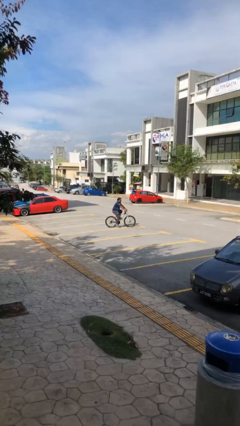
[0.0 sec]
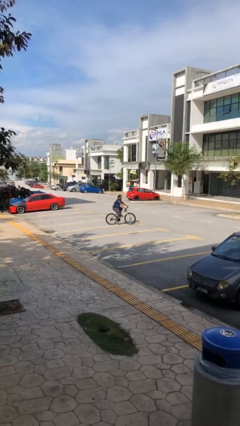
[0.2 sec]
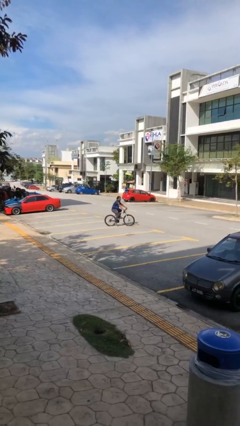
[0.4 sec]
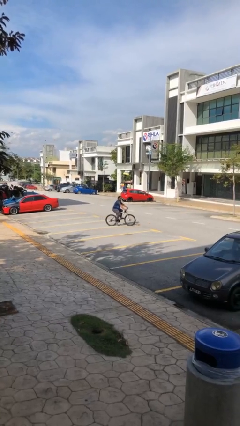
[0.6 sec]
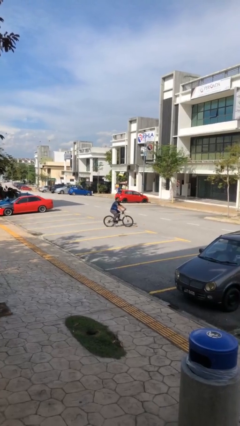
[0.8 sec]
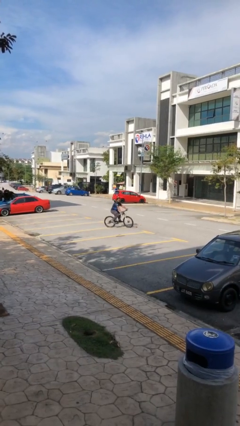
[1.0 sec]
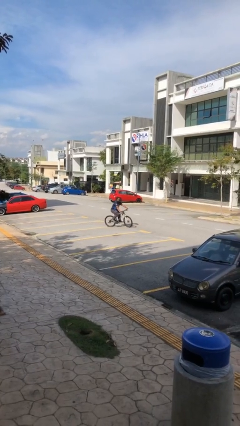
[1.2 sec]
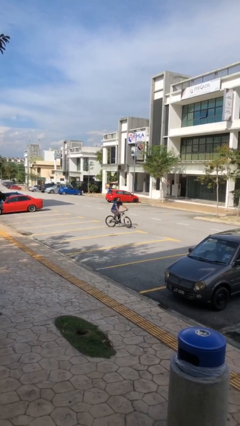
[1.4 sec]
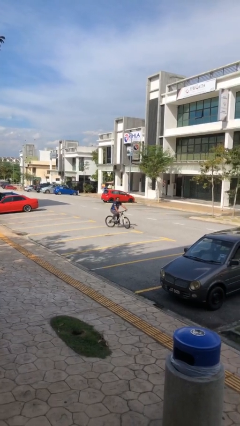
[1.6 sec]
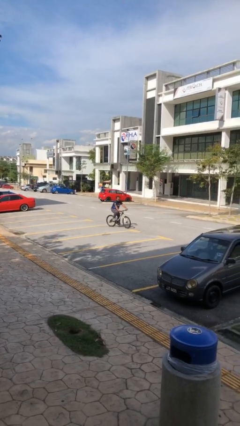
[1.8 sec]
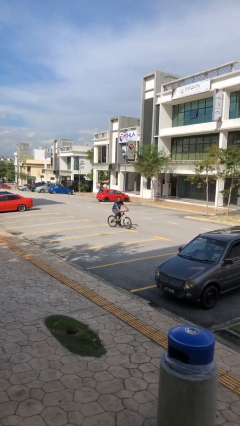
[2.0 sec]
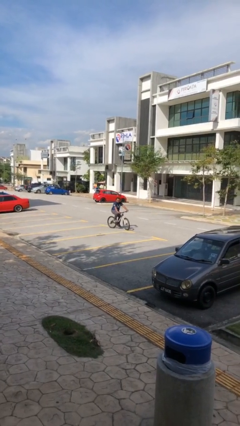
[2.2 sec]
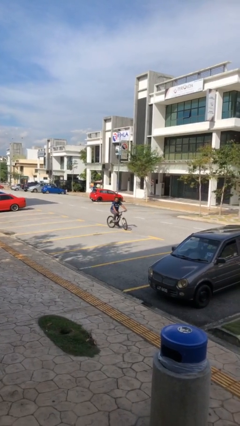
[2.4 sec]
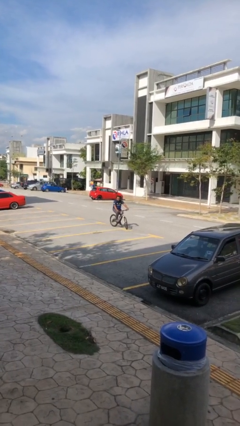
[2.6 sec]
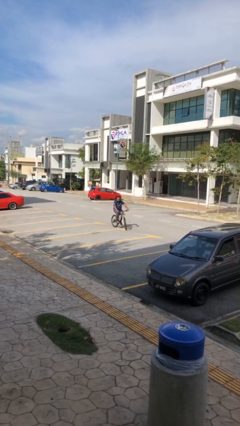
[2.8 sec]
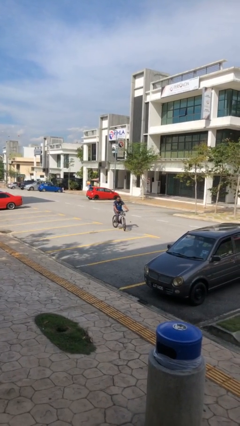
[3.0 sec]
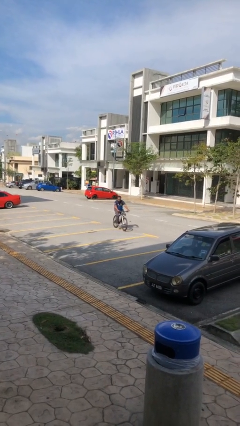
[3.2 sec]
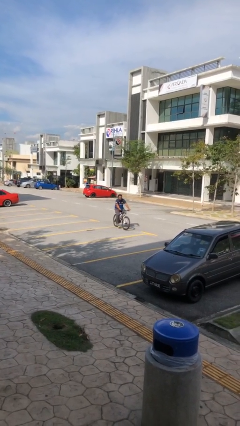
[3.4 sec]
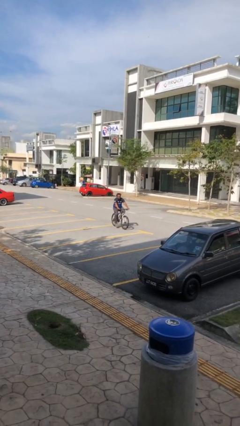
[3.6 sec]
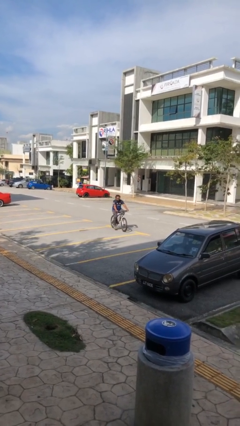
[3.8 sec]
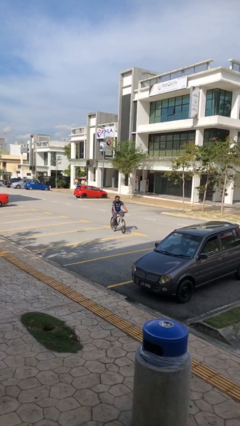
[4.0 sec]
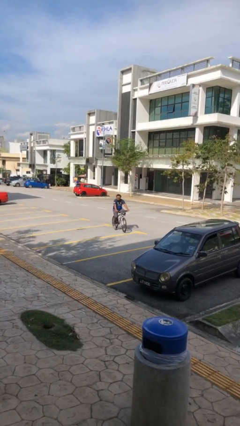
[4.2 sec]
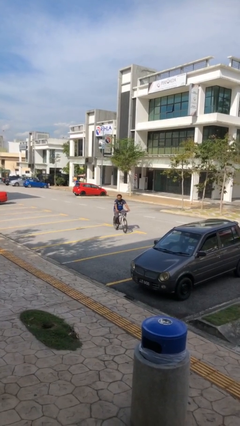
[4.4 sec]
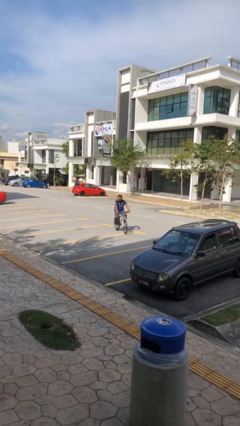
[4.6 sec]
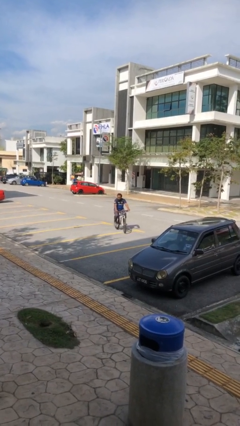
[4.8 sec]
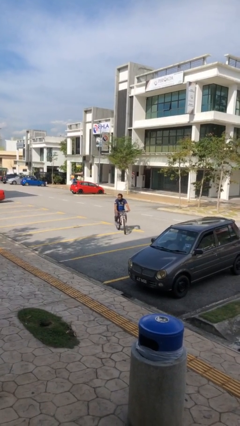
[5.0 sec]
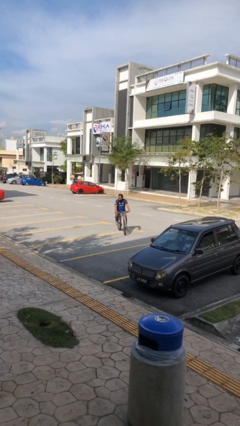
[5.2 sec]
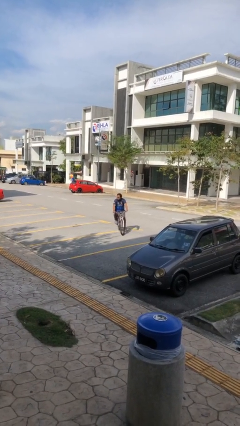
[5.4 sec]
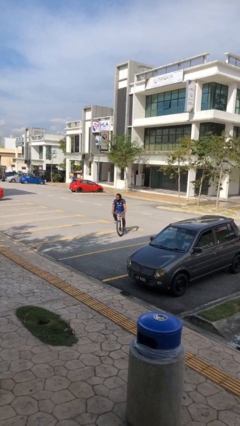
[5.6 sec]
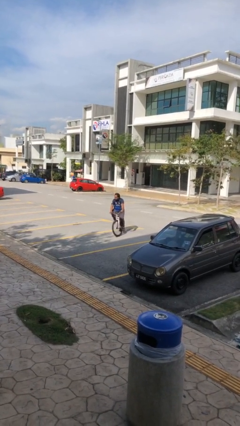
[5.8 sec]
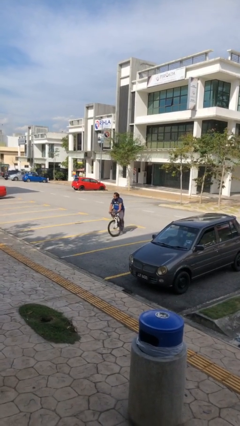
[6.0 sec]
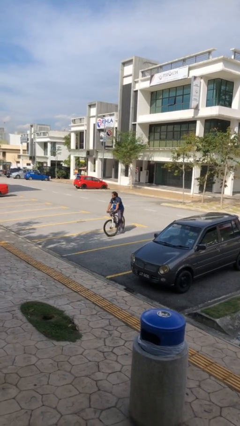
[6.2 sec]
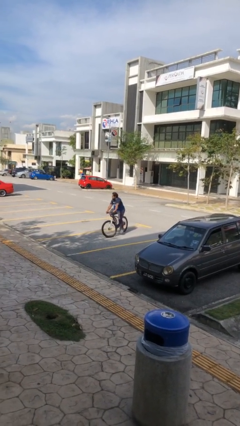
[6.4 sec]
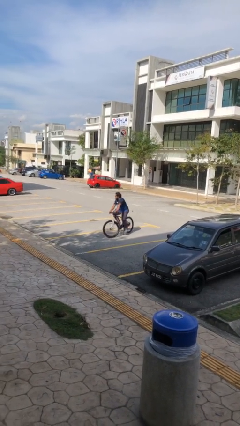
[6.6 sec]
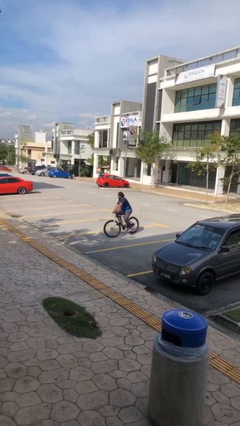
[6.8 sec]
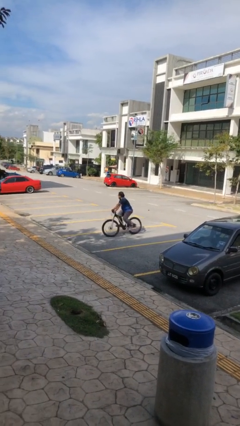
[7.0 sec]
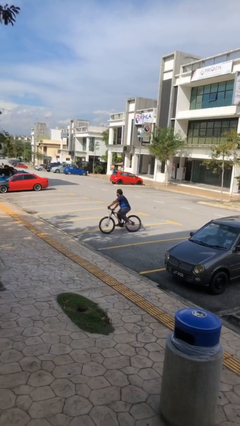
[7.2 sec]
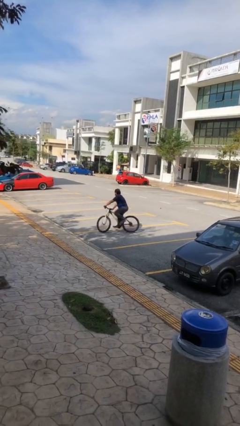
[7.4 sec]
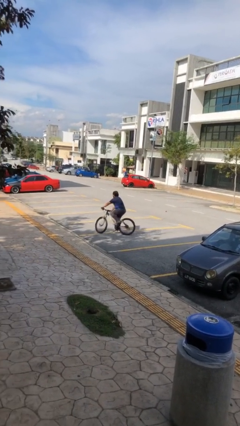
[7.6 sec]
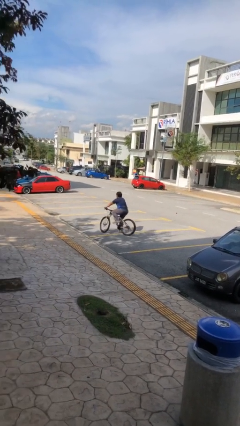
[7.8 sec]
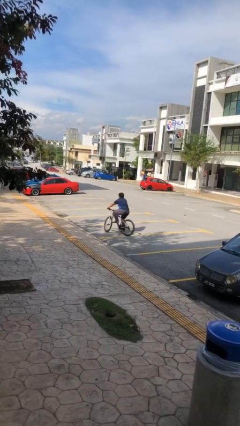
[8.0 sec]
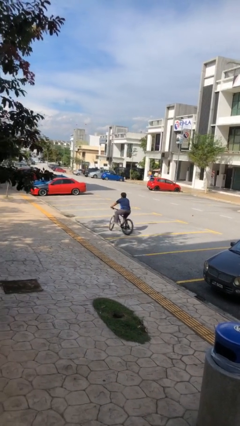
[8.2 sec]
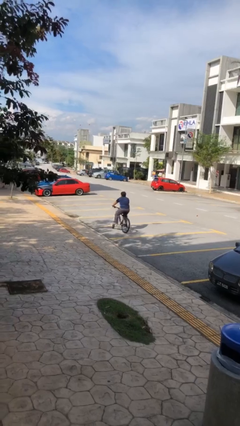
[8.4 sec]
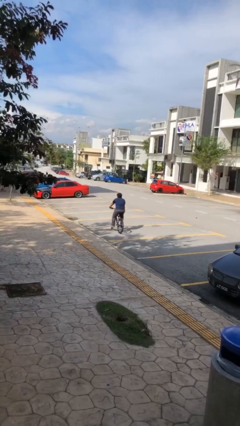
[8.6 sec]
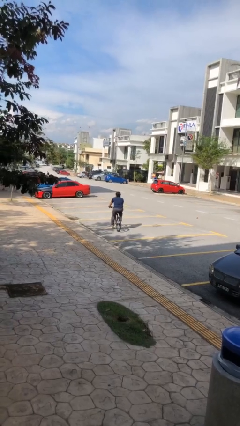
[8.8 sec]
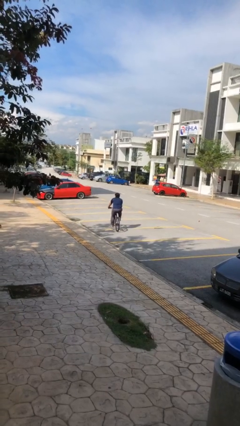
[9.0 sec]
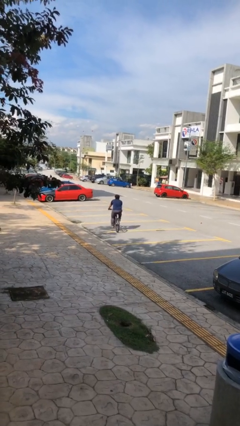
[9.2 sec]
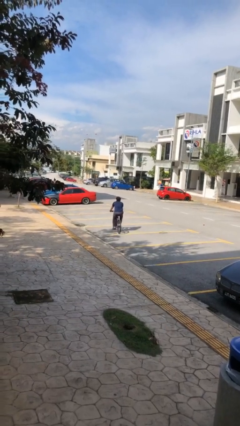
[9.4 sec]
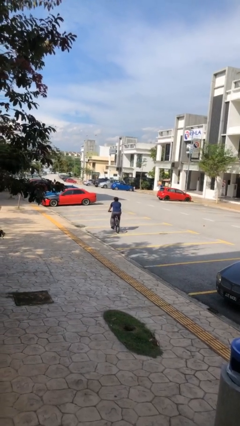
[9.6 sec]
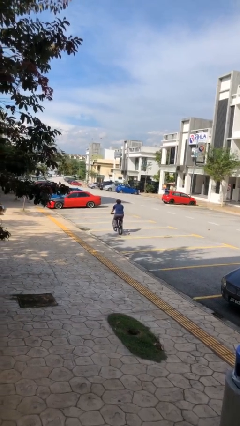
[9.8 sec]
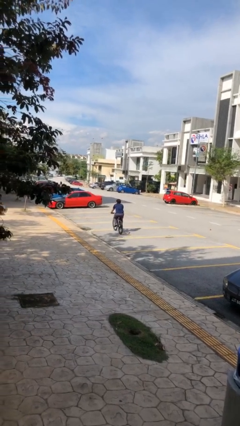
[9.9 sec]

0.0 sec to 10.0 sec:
person rides bicycle

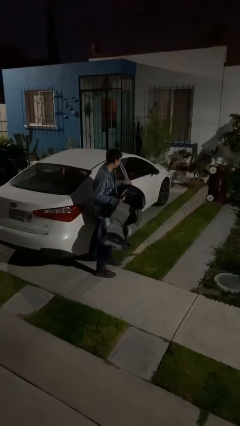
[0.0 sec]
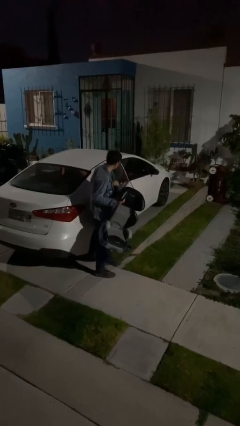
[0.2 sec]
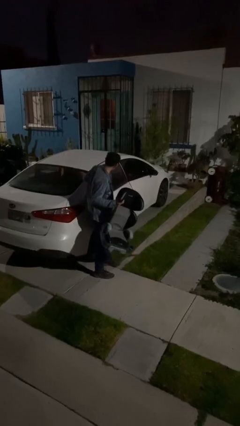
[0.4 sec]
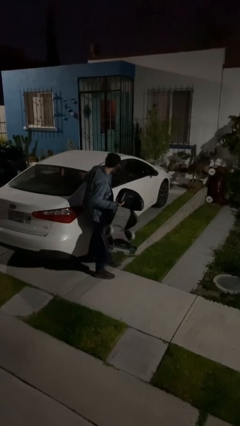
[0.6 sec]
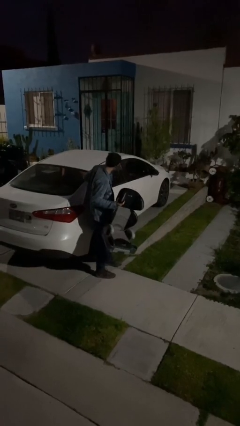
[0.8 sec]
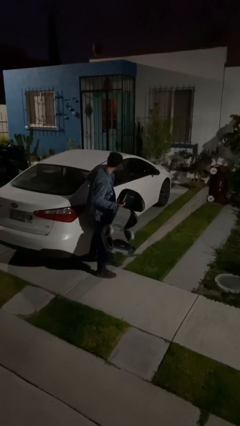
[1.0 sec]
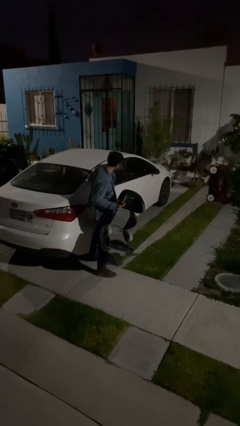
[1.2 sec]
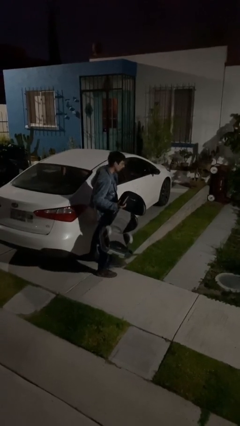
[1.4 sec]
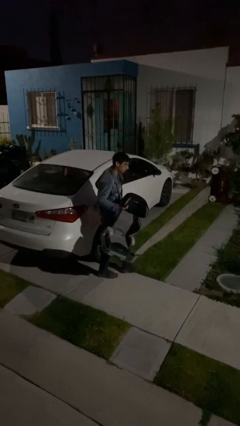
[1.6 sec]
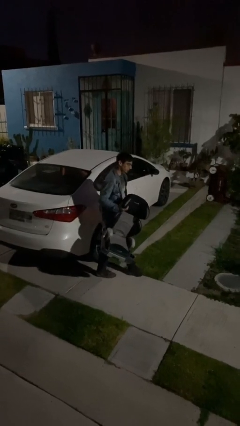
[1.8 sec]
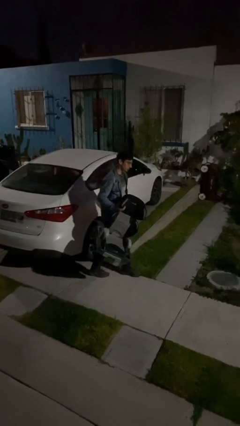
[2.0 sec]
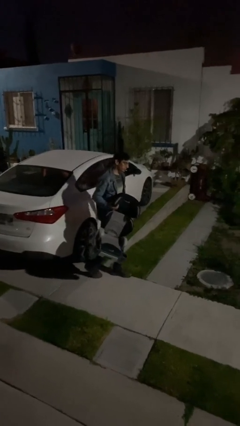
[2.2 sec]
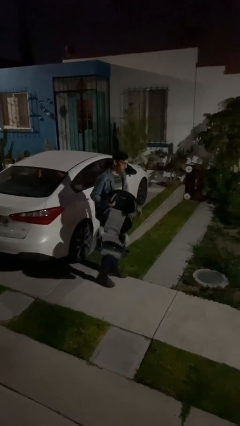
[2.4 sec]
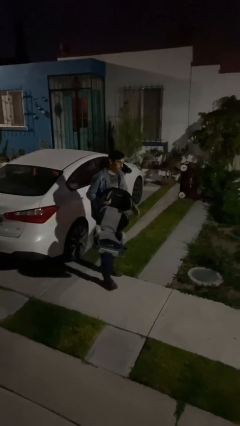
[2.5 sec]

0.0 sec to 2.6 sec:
person closes car door

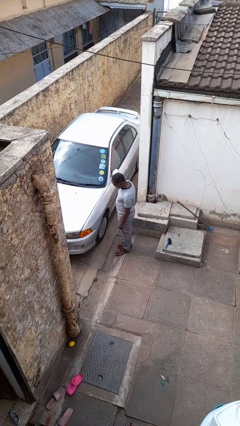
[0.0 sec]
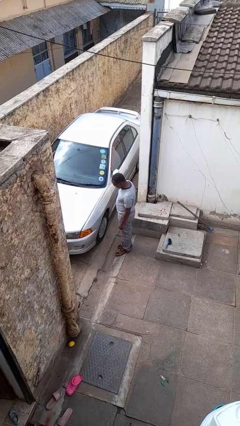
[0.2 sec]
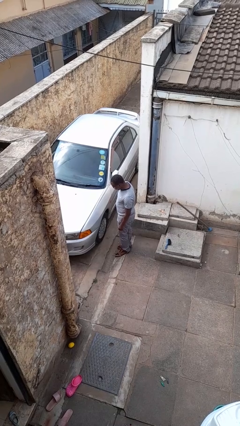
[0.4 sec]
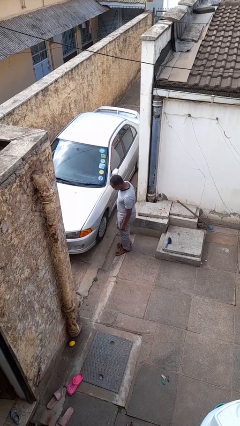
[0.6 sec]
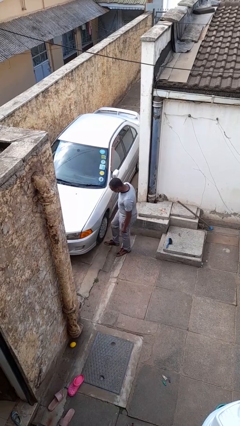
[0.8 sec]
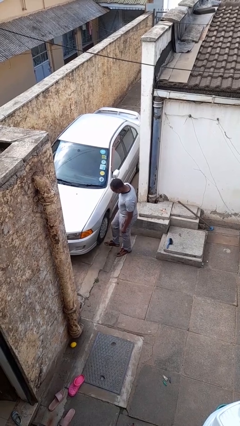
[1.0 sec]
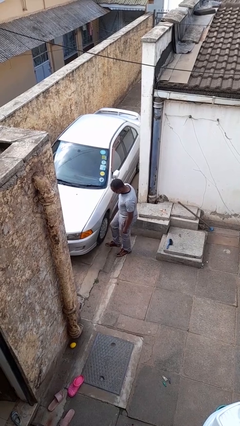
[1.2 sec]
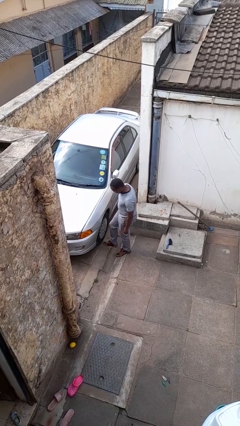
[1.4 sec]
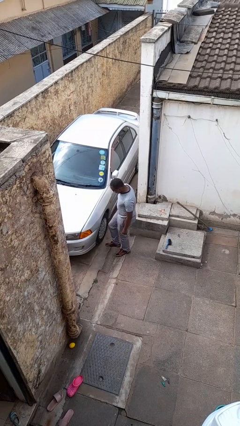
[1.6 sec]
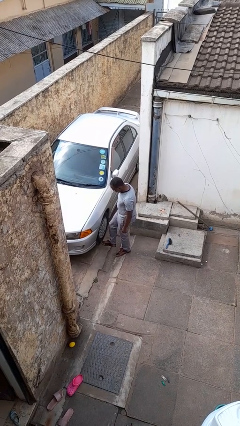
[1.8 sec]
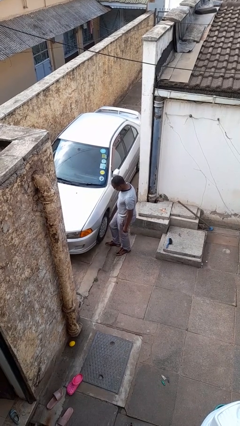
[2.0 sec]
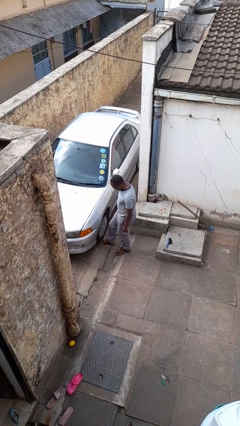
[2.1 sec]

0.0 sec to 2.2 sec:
person kicks car tires

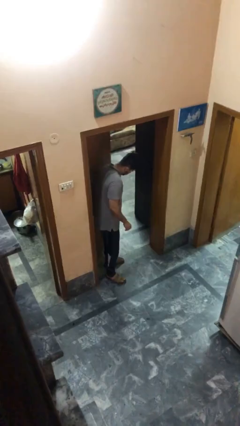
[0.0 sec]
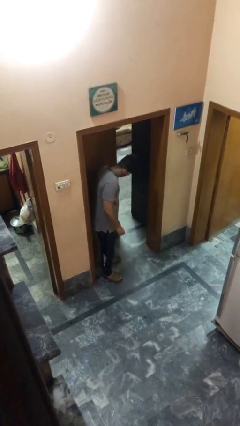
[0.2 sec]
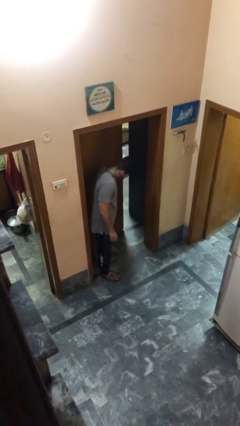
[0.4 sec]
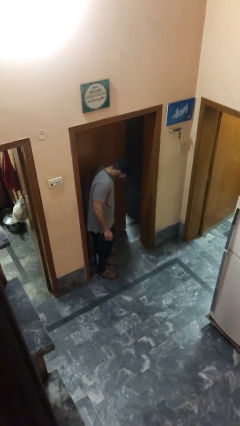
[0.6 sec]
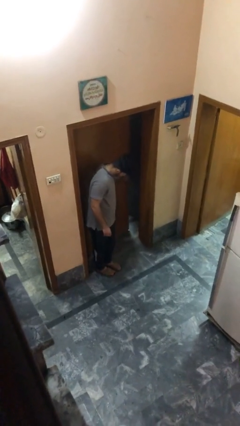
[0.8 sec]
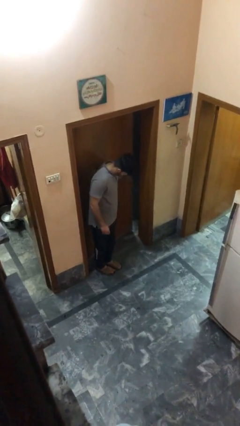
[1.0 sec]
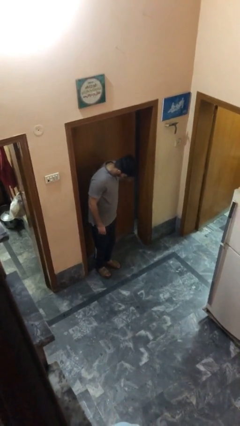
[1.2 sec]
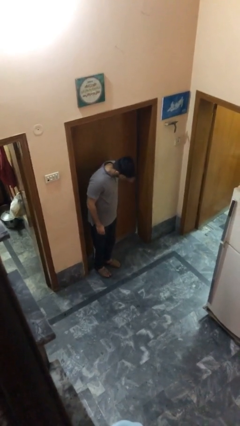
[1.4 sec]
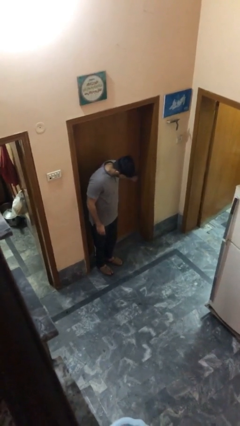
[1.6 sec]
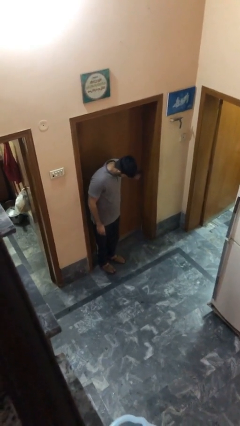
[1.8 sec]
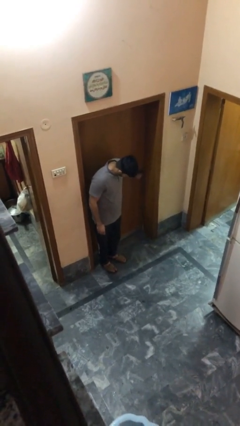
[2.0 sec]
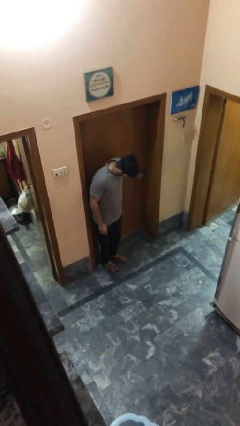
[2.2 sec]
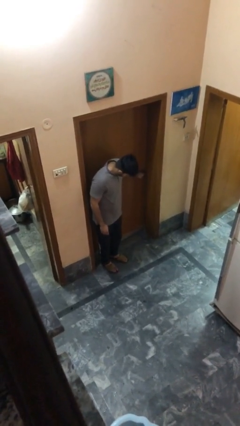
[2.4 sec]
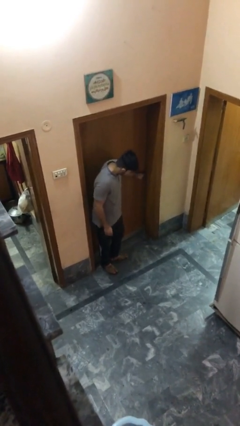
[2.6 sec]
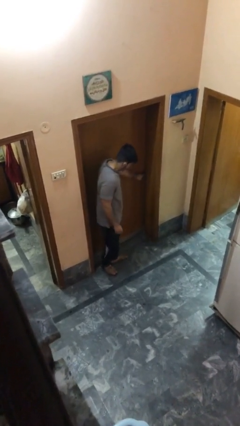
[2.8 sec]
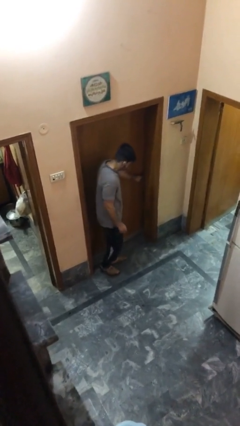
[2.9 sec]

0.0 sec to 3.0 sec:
person closes facility door
